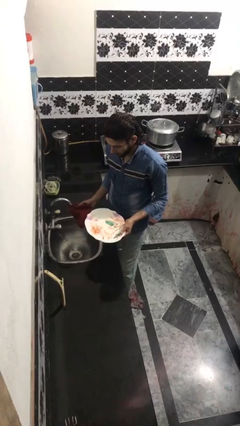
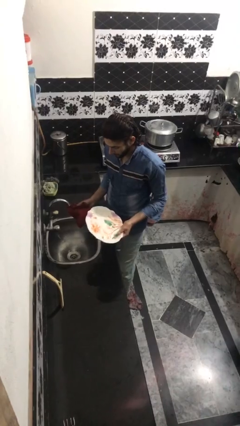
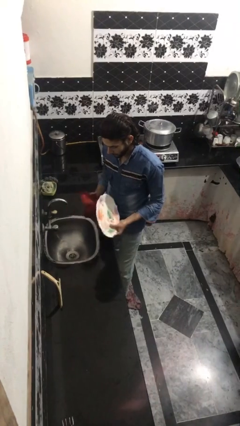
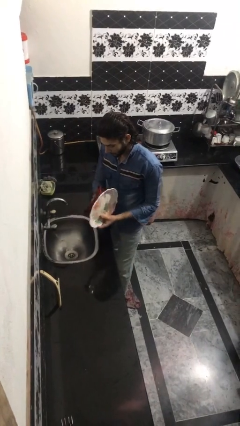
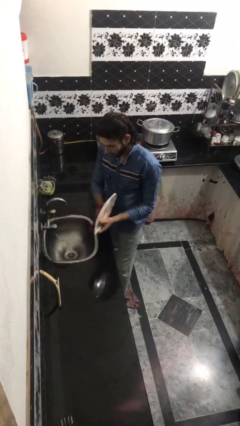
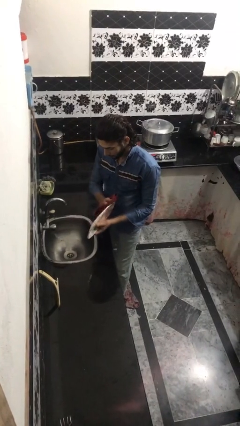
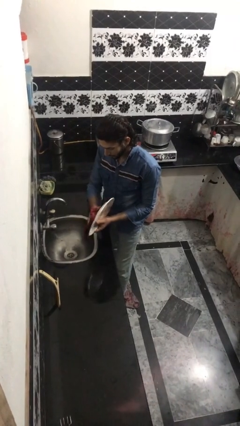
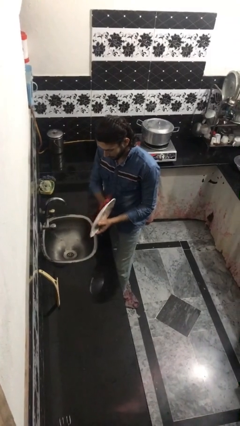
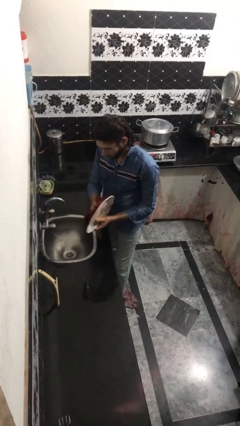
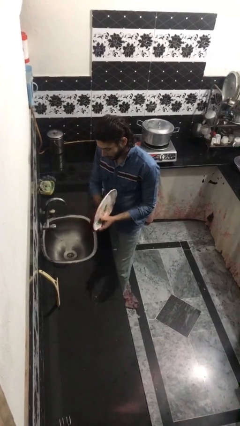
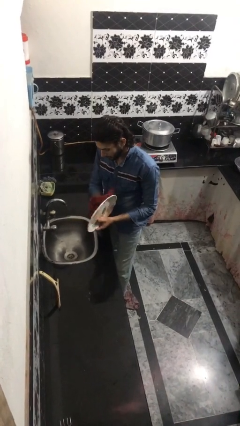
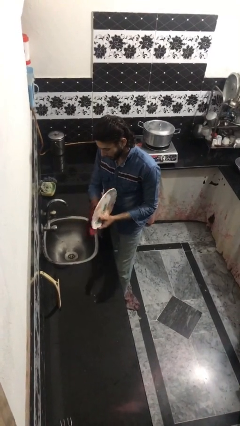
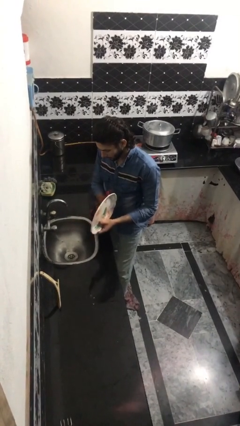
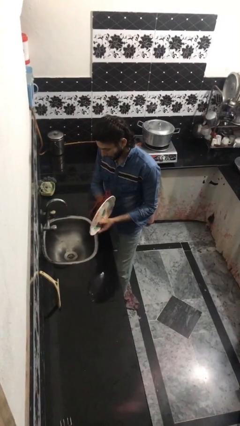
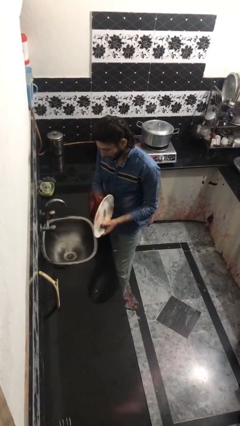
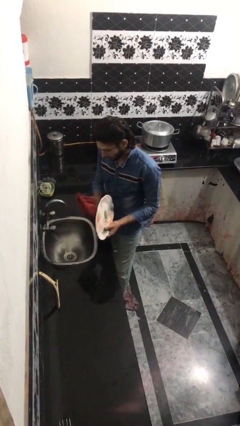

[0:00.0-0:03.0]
person dries dish

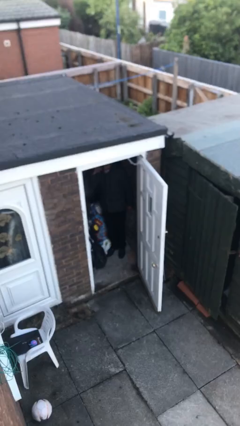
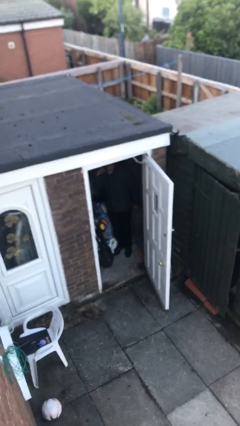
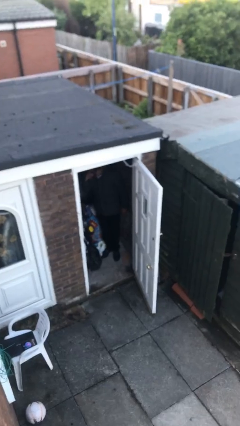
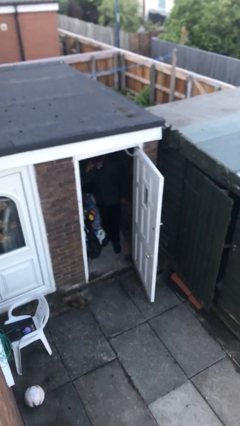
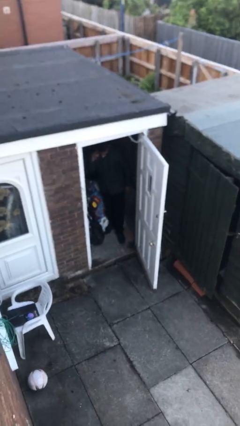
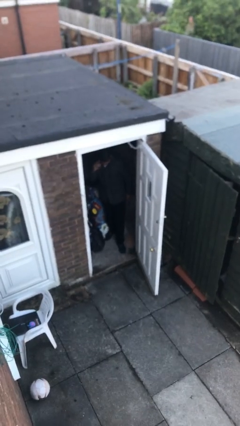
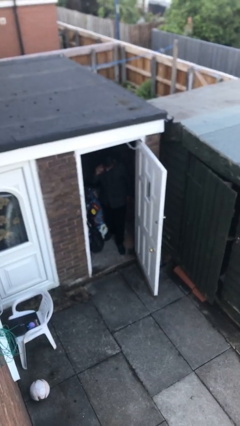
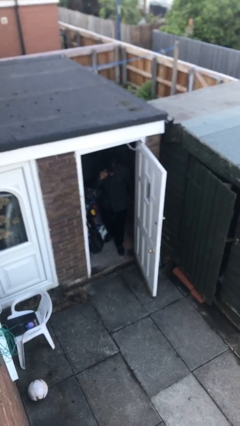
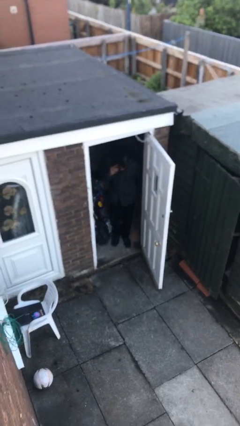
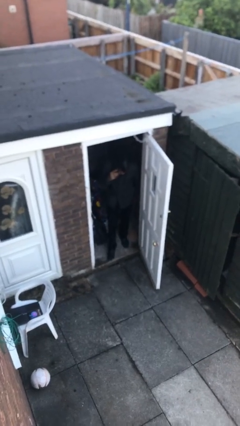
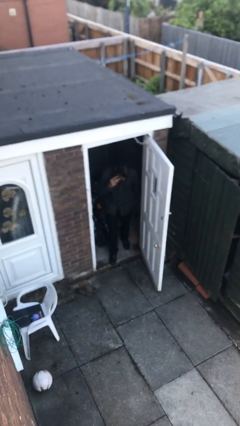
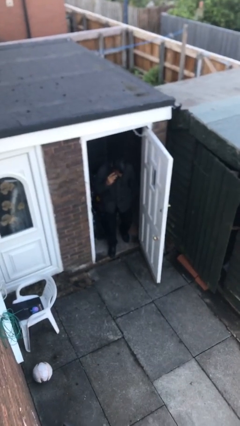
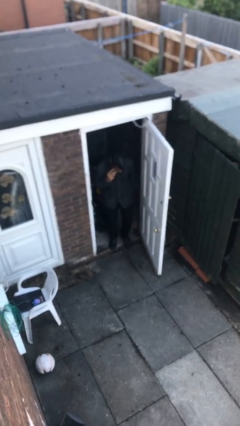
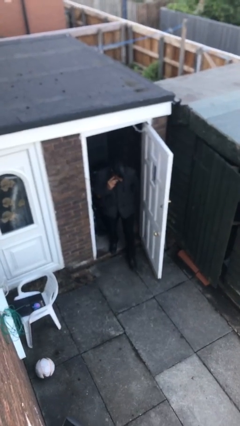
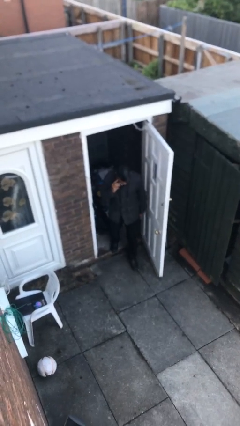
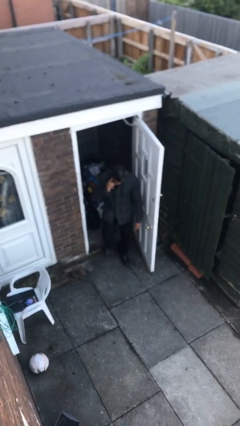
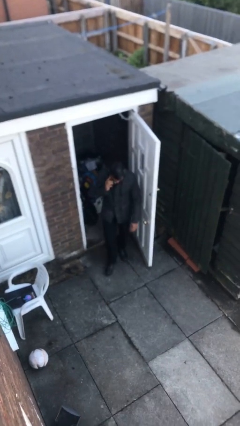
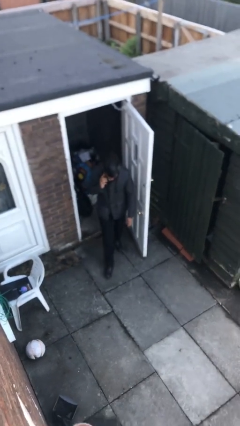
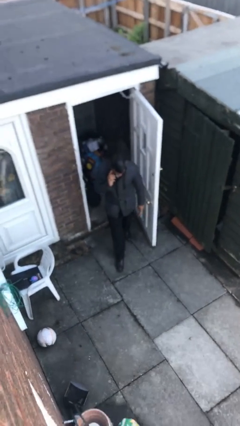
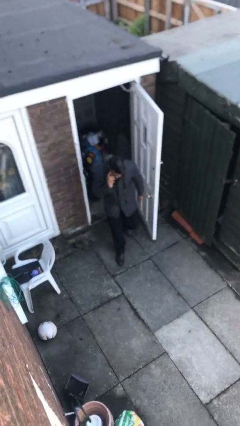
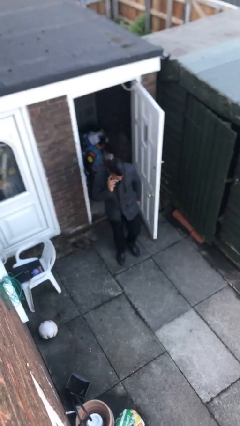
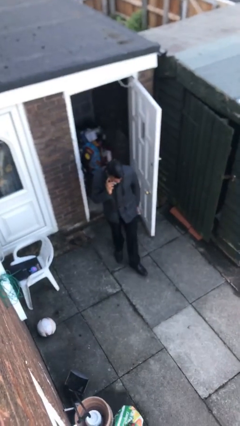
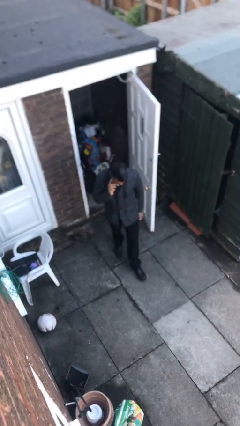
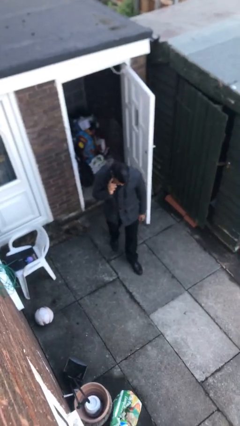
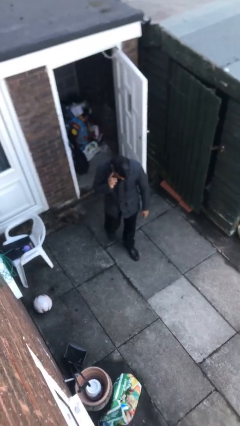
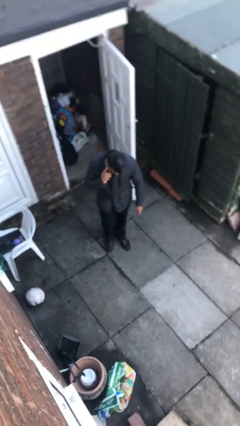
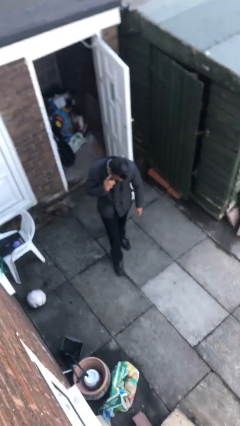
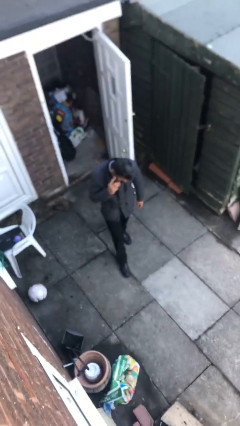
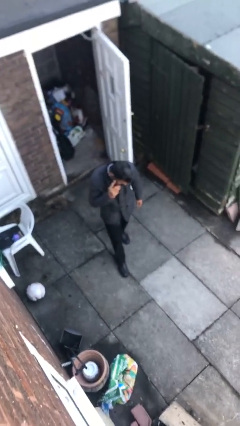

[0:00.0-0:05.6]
person enters scene through structure

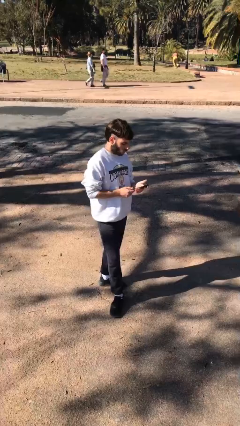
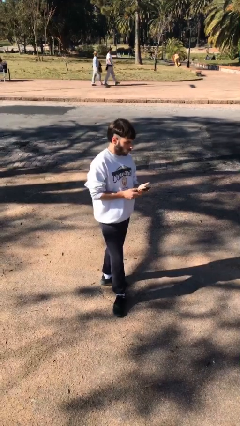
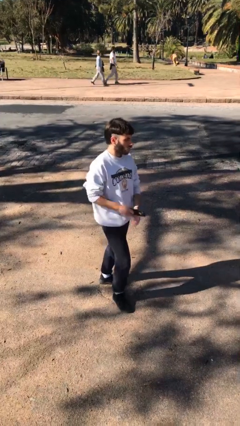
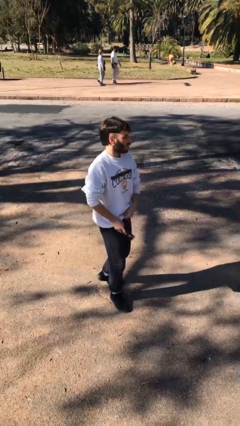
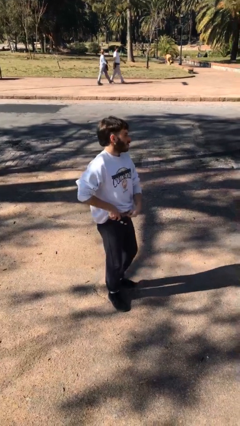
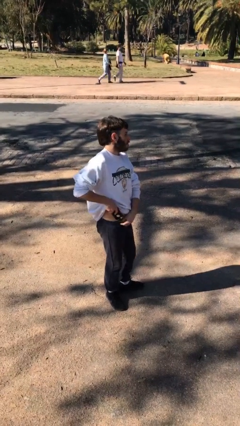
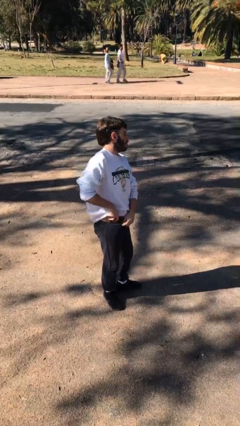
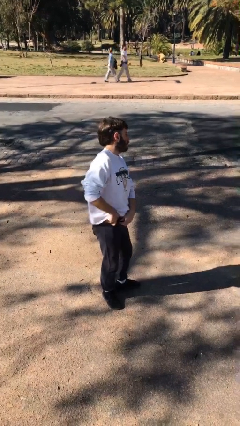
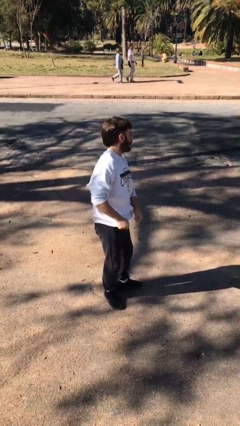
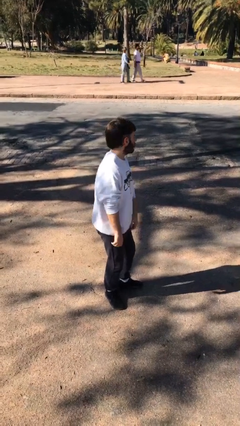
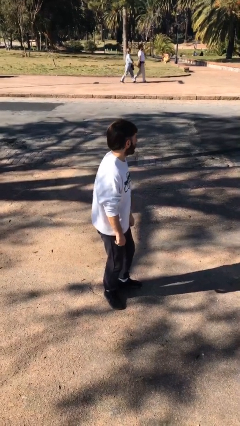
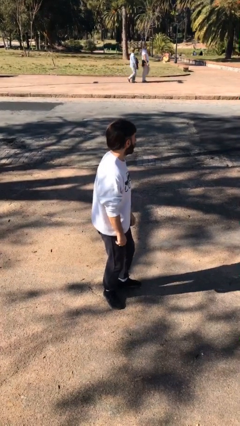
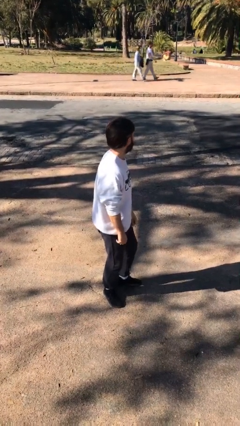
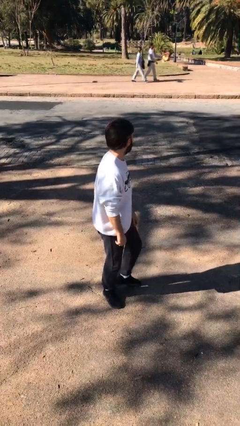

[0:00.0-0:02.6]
person puts phone into pocket

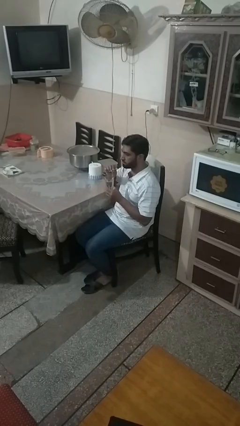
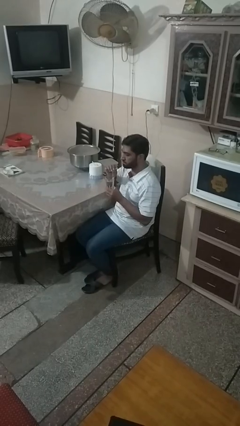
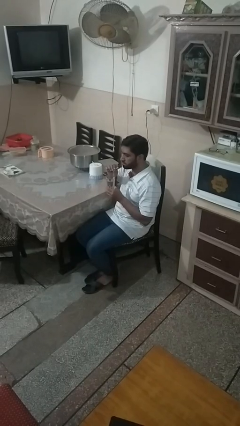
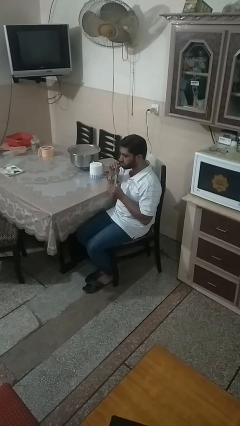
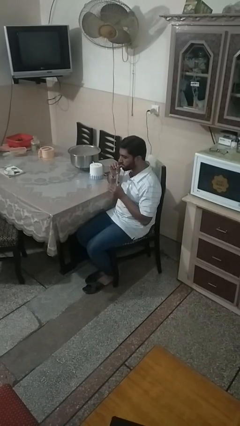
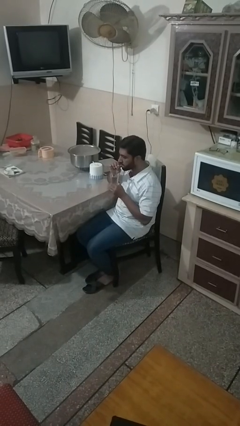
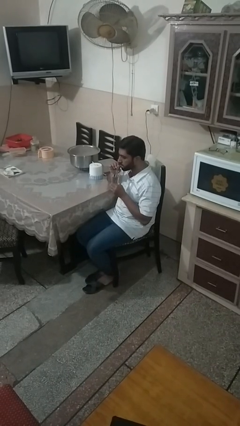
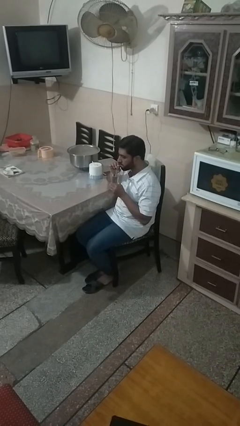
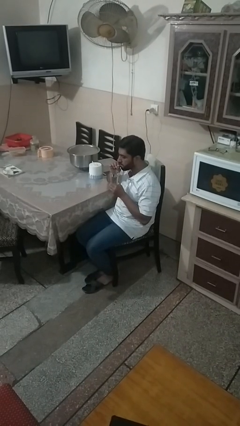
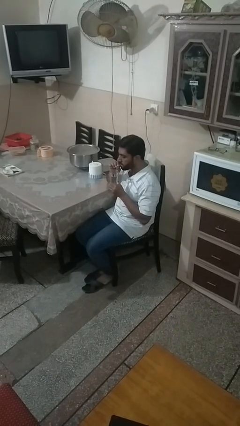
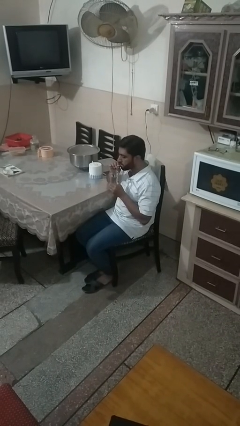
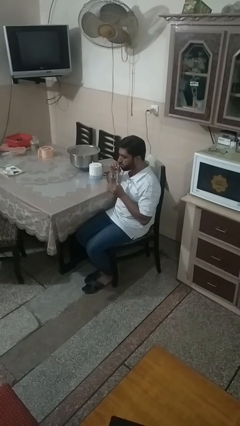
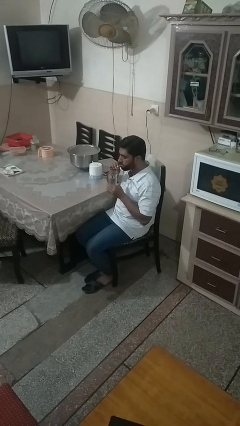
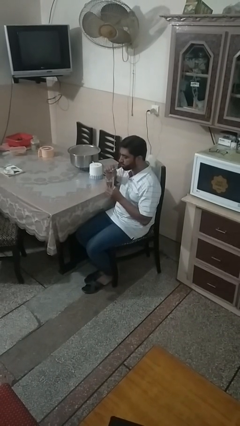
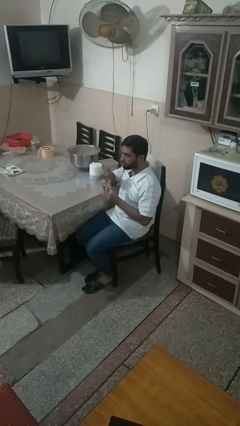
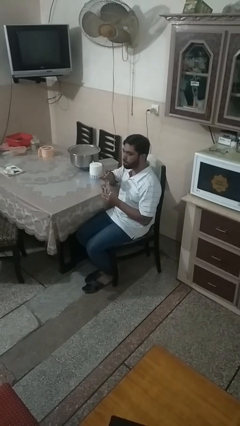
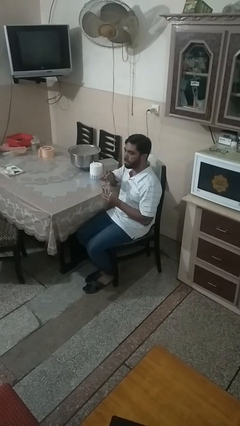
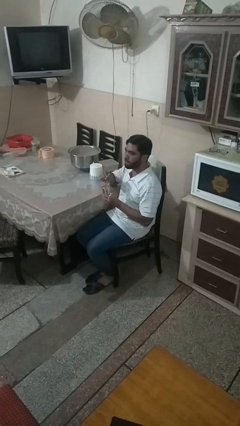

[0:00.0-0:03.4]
person drinks from straw

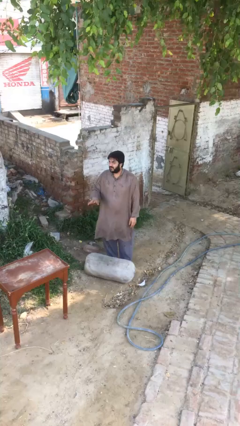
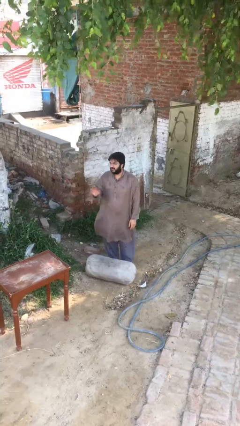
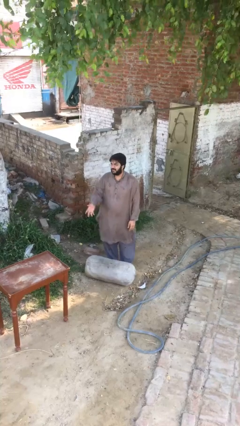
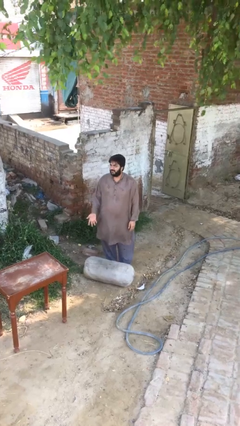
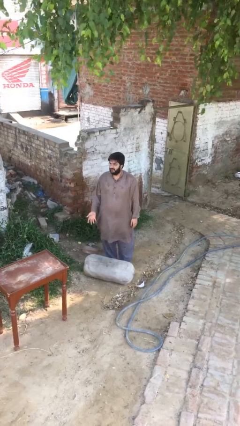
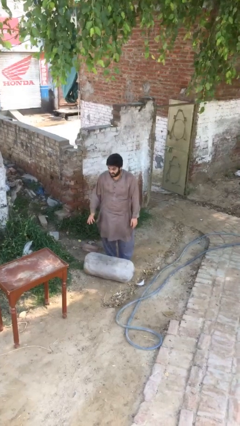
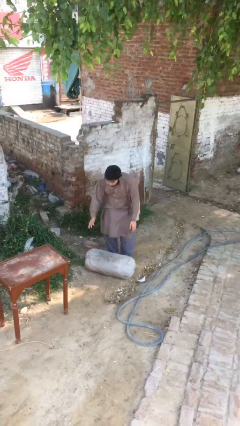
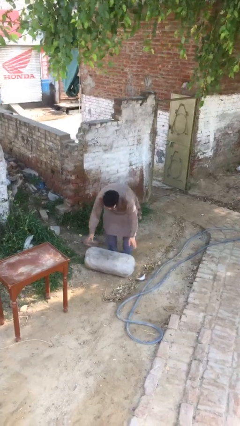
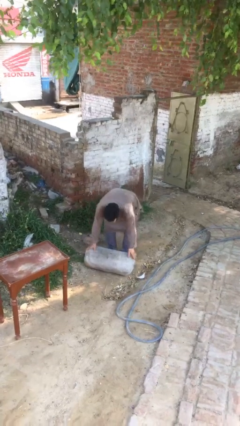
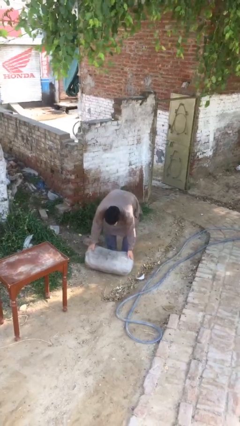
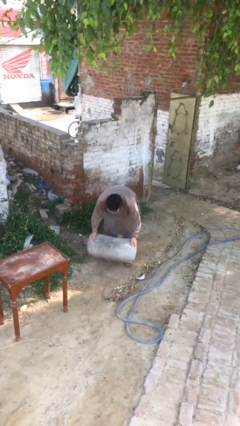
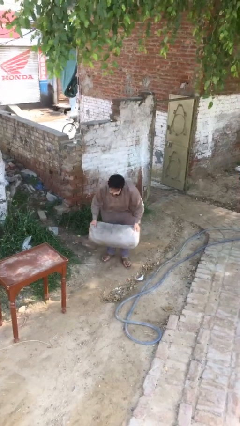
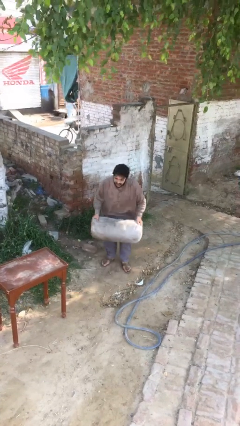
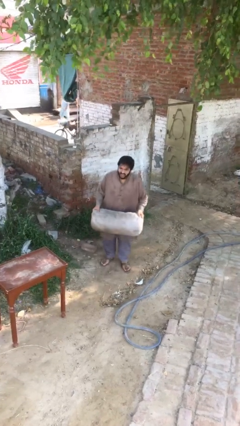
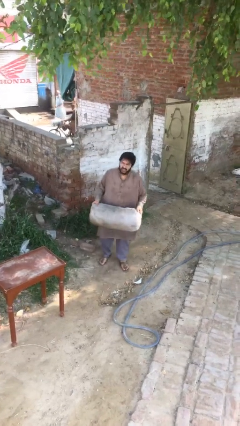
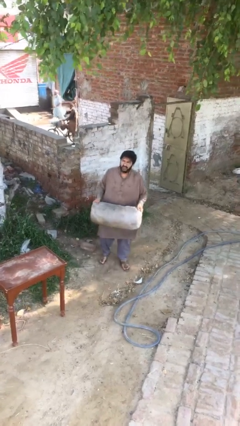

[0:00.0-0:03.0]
person picks up object from floor

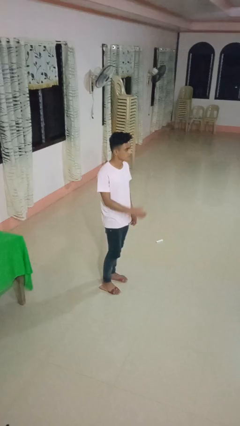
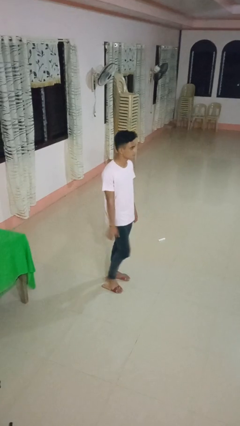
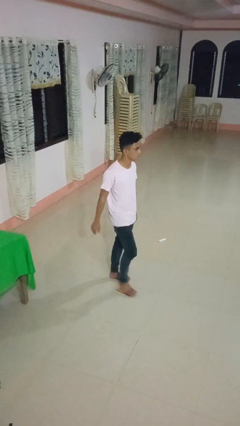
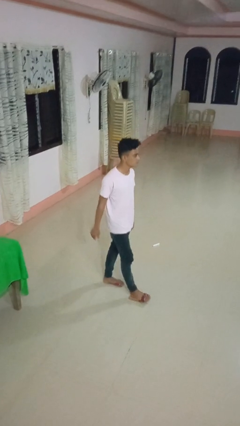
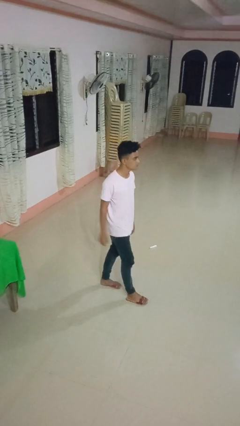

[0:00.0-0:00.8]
person slaps hands on thighs
